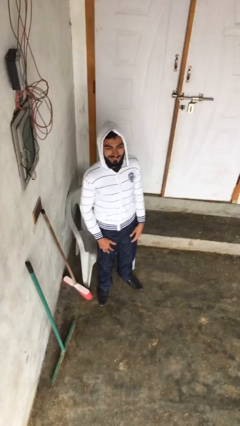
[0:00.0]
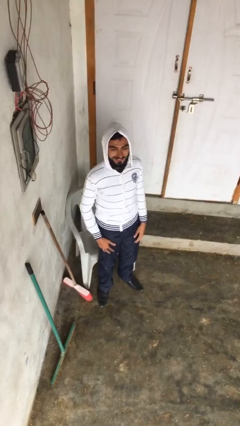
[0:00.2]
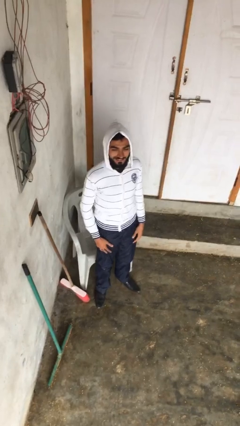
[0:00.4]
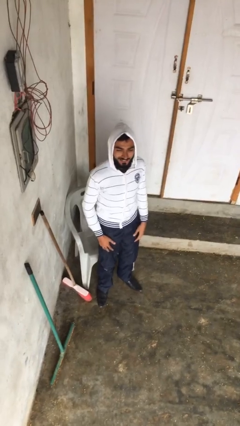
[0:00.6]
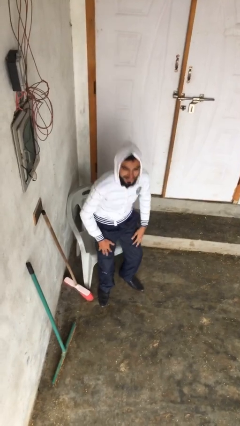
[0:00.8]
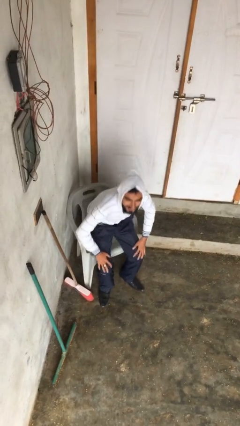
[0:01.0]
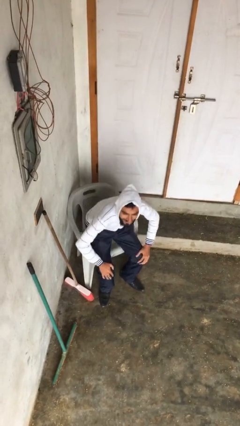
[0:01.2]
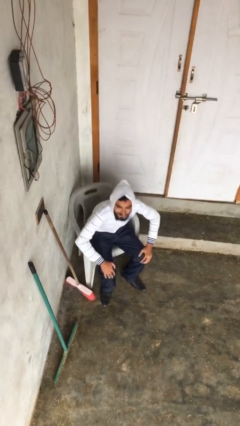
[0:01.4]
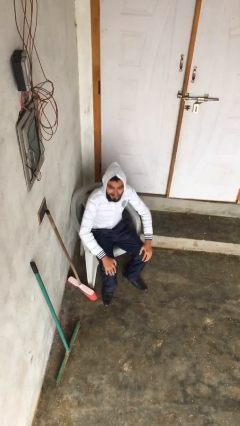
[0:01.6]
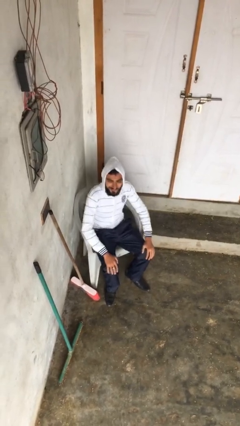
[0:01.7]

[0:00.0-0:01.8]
person sits down

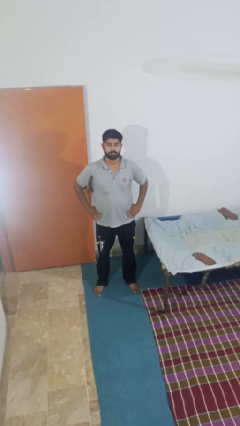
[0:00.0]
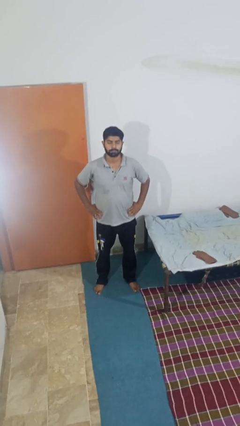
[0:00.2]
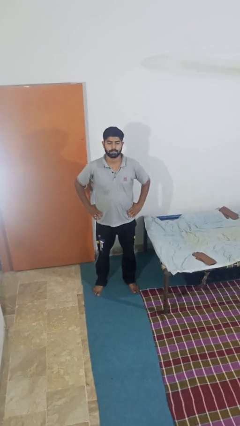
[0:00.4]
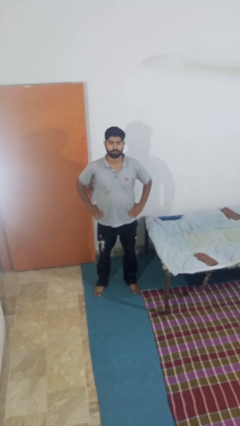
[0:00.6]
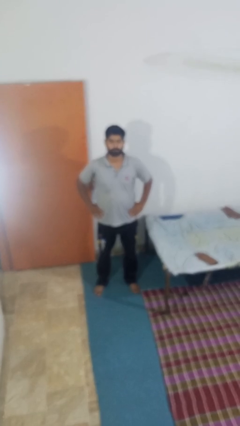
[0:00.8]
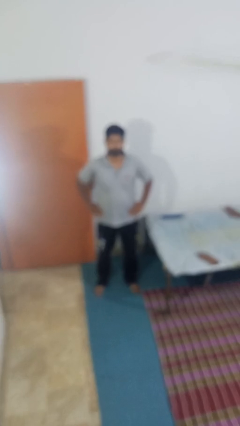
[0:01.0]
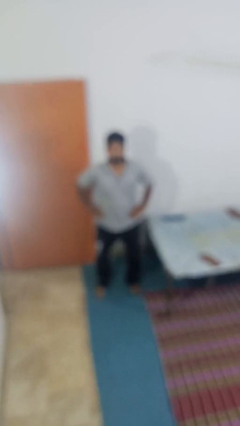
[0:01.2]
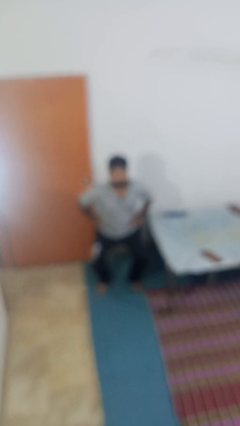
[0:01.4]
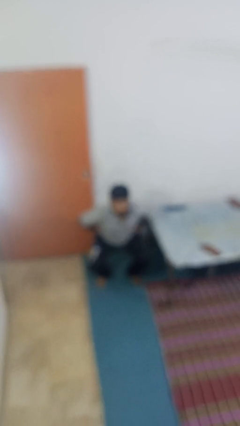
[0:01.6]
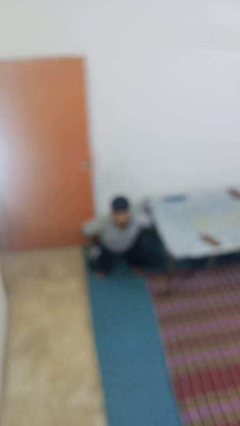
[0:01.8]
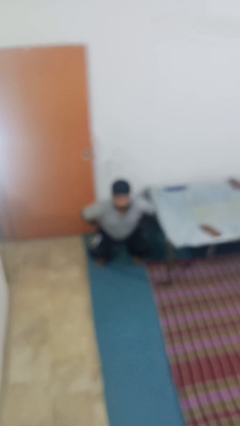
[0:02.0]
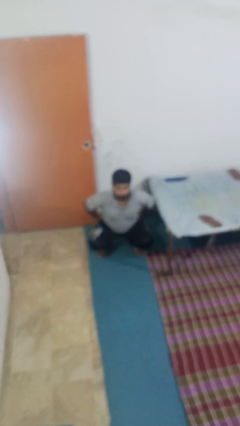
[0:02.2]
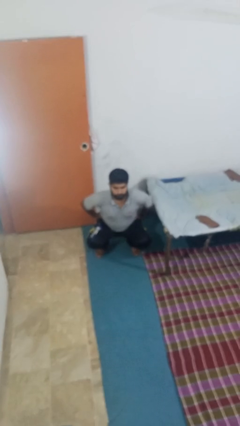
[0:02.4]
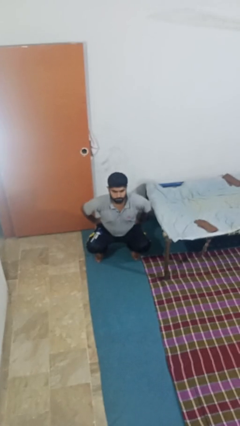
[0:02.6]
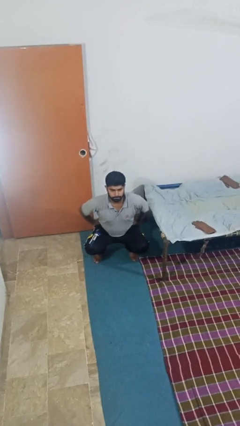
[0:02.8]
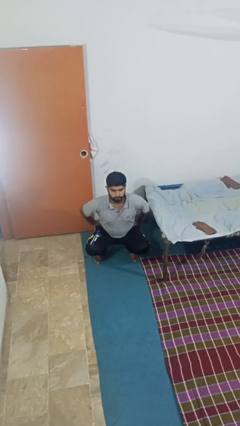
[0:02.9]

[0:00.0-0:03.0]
person squats

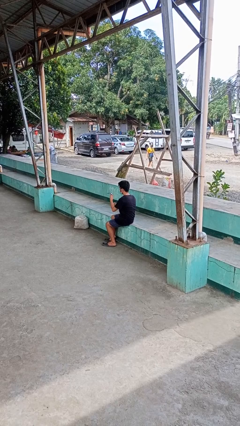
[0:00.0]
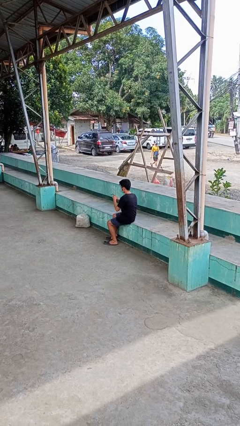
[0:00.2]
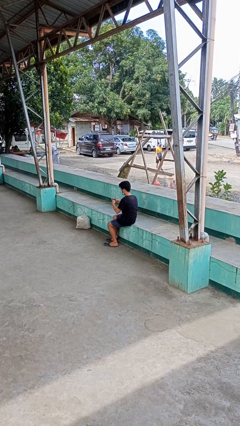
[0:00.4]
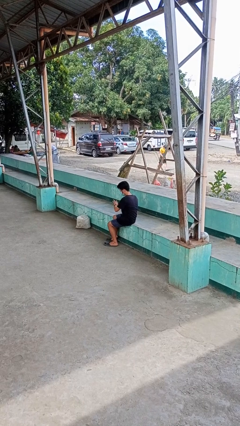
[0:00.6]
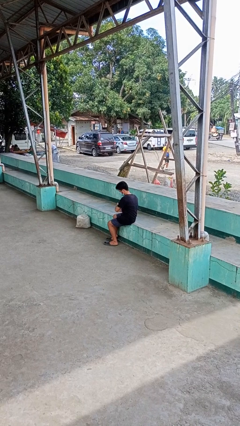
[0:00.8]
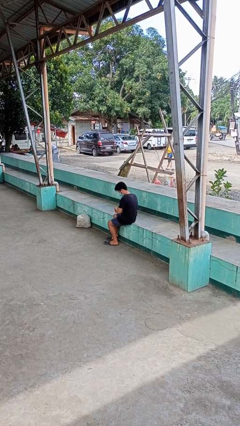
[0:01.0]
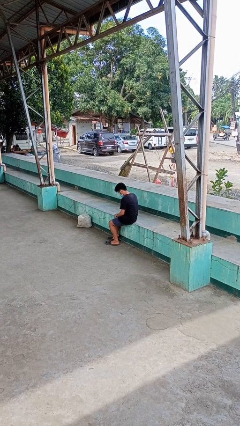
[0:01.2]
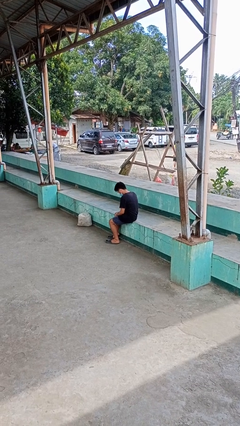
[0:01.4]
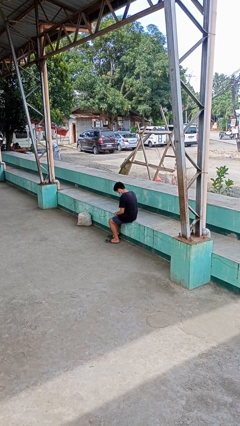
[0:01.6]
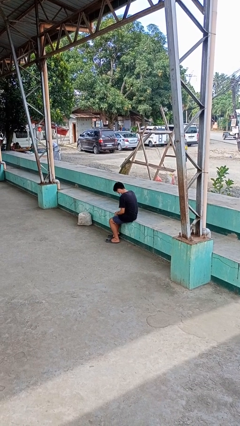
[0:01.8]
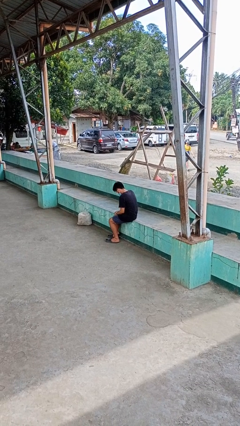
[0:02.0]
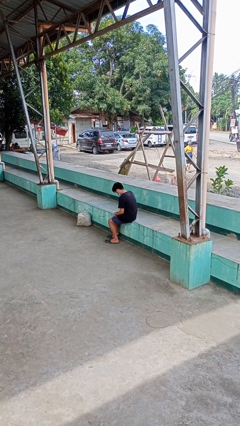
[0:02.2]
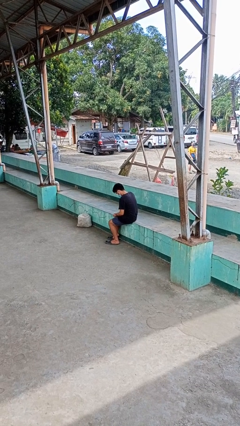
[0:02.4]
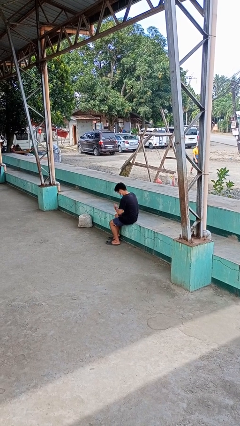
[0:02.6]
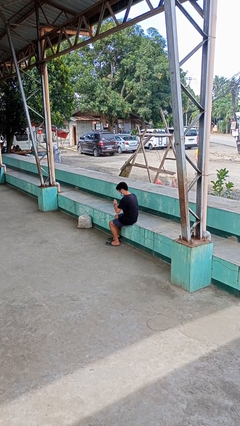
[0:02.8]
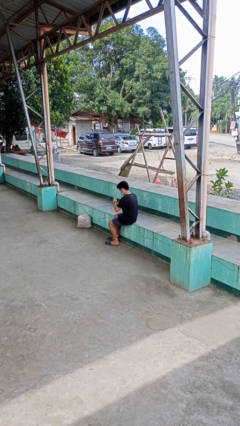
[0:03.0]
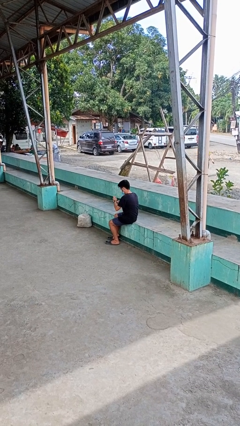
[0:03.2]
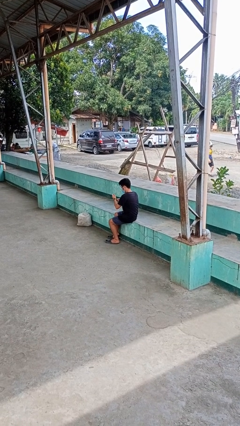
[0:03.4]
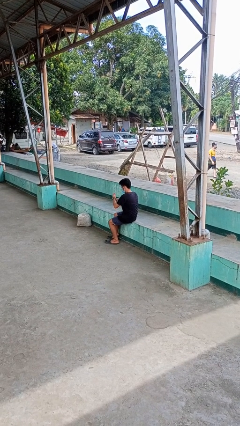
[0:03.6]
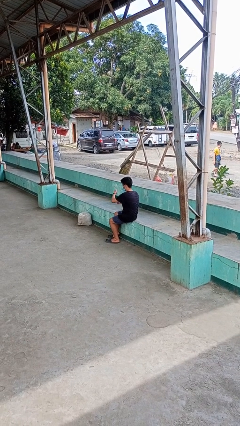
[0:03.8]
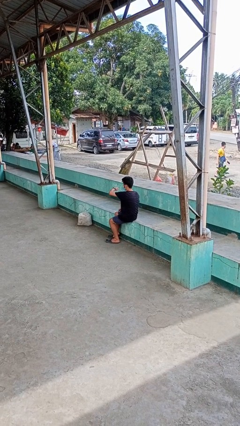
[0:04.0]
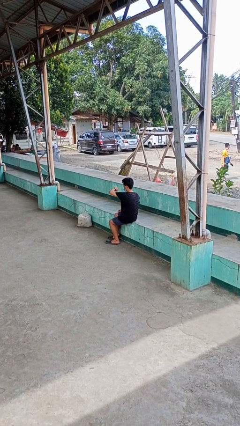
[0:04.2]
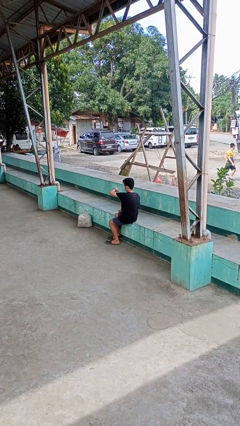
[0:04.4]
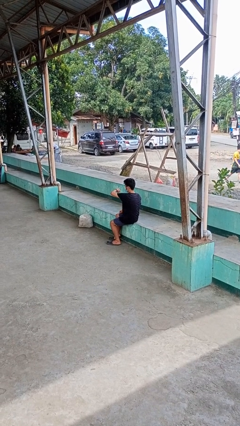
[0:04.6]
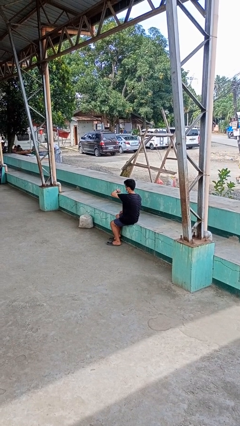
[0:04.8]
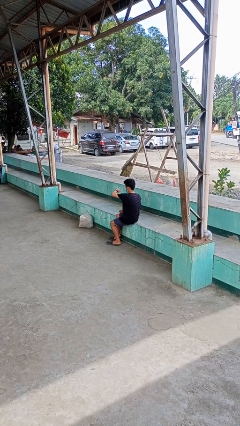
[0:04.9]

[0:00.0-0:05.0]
person puts on wristwatch

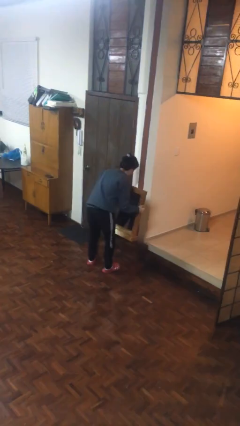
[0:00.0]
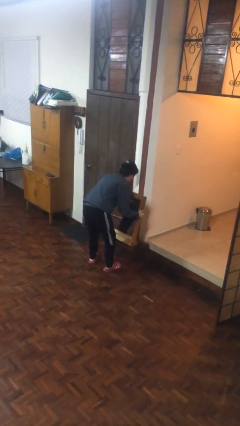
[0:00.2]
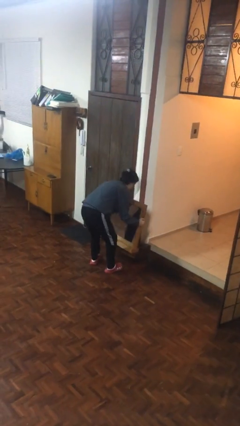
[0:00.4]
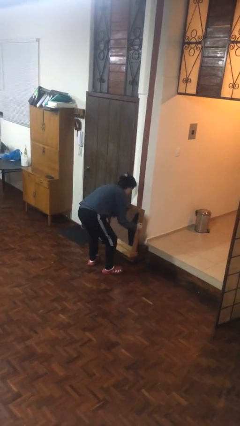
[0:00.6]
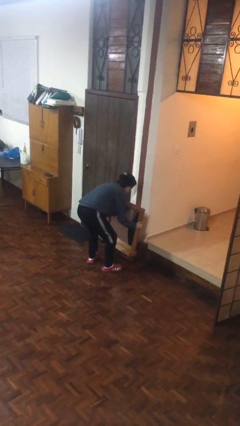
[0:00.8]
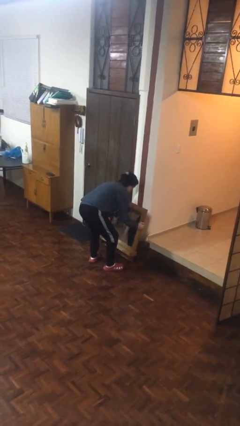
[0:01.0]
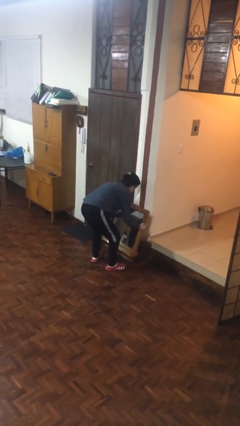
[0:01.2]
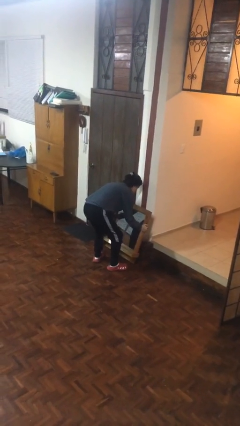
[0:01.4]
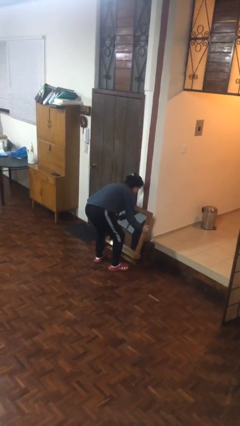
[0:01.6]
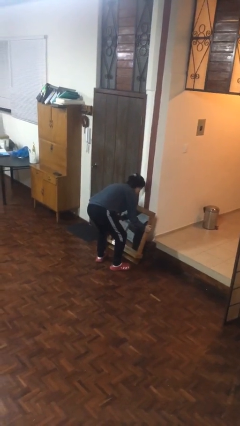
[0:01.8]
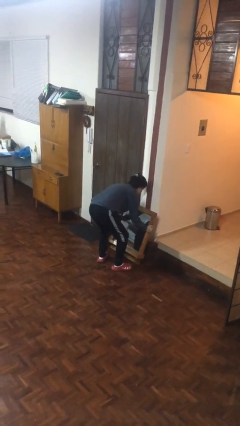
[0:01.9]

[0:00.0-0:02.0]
person puts down object on floor

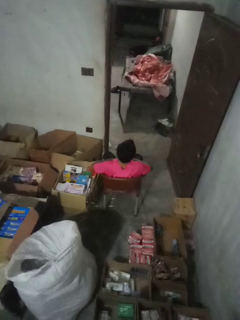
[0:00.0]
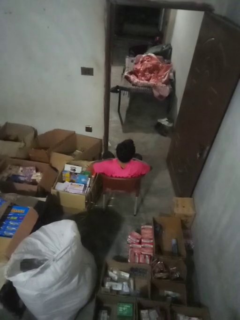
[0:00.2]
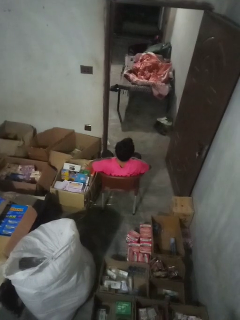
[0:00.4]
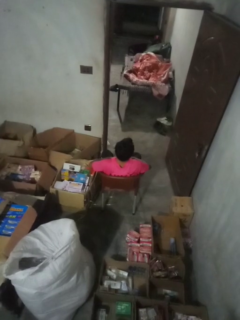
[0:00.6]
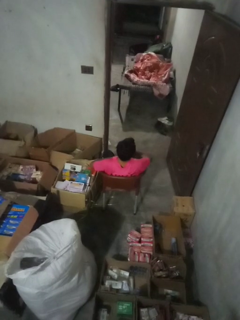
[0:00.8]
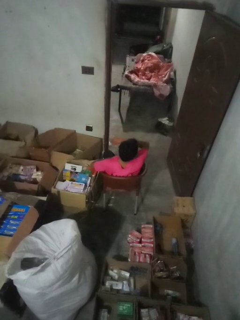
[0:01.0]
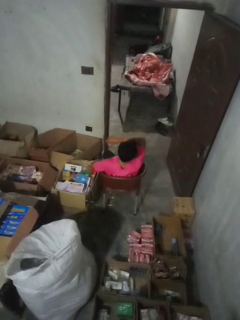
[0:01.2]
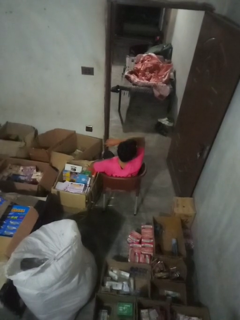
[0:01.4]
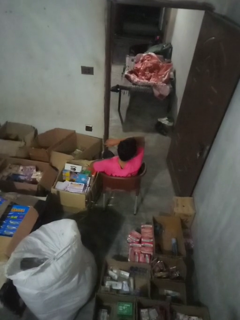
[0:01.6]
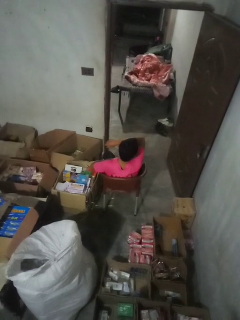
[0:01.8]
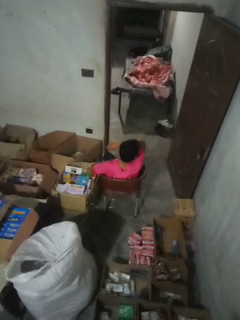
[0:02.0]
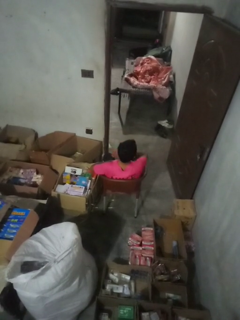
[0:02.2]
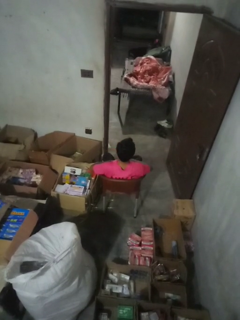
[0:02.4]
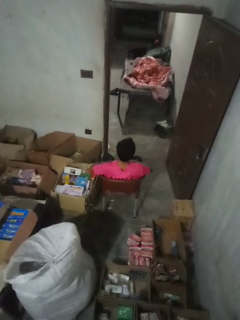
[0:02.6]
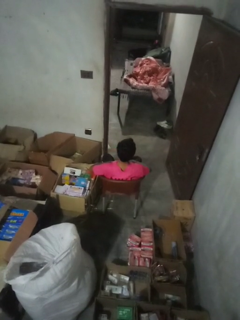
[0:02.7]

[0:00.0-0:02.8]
person sneezes into arm

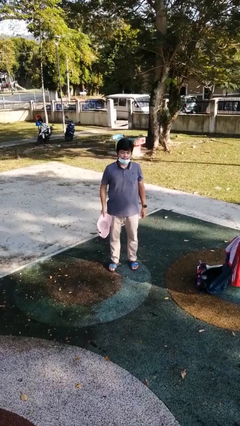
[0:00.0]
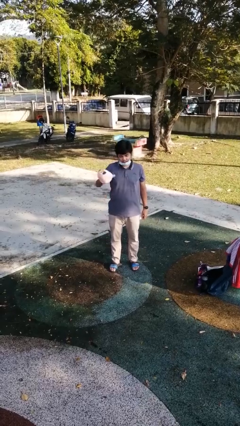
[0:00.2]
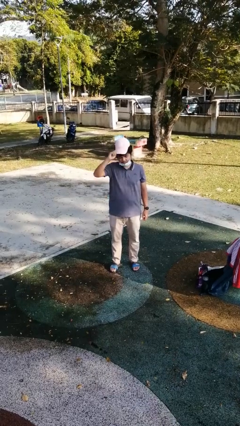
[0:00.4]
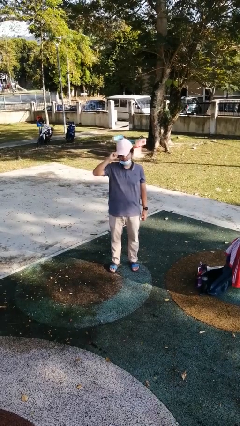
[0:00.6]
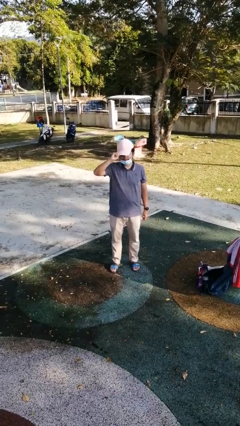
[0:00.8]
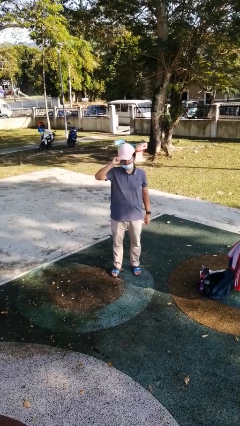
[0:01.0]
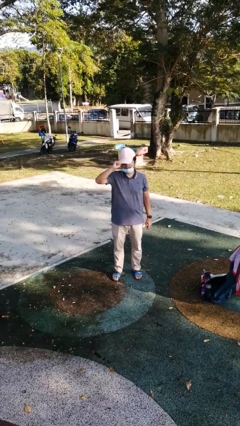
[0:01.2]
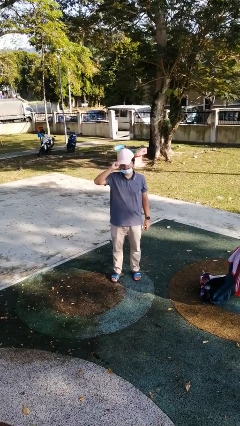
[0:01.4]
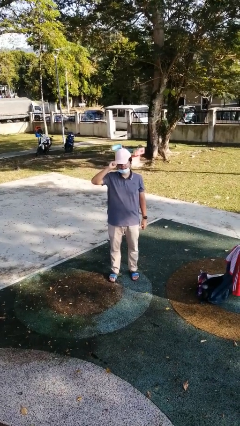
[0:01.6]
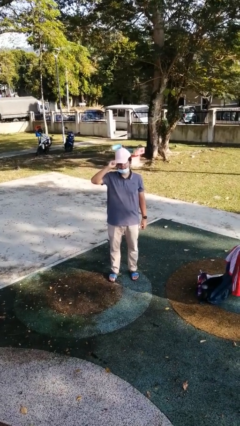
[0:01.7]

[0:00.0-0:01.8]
person puts on hat

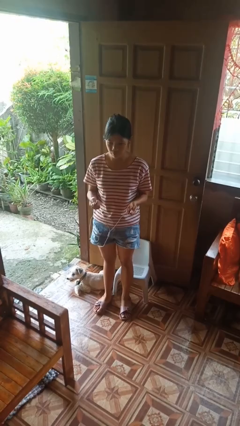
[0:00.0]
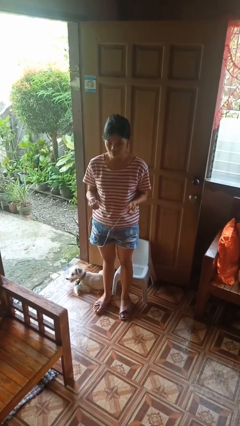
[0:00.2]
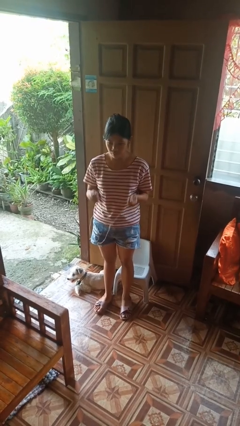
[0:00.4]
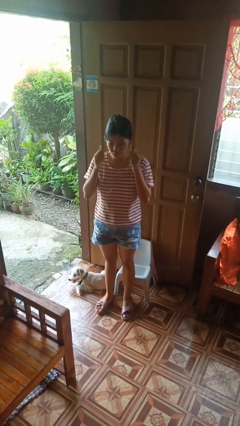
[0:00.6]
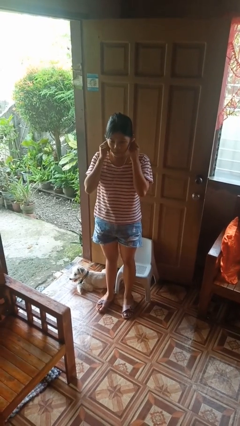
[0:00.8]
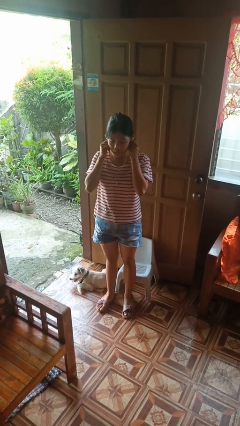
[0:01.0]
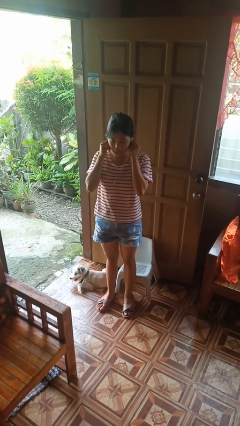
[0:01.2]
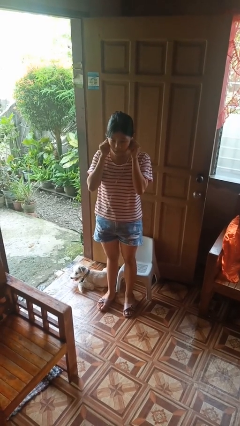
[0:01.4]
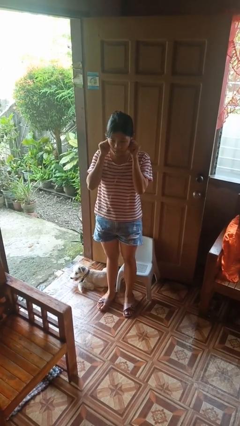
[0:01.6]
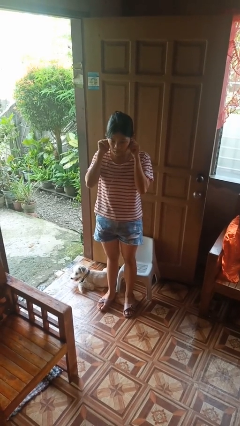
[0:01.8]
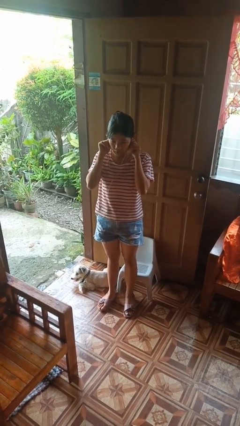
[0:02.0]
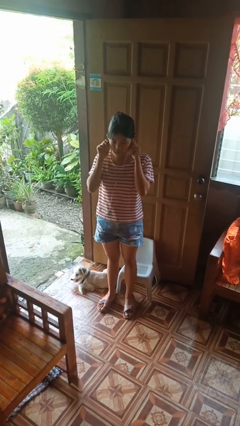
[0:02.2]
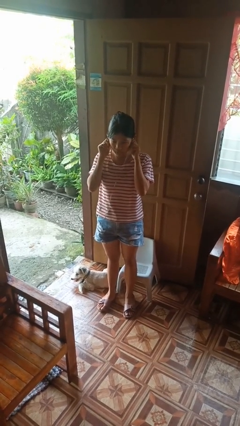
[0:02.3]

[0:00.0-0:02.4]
person puts on headphones
